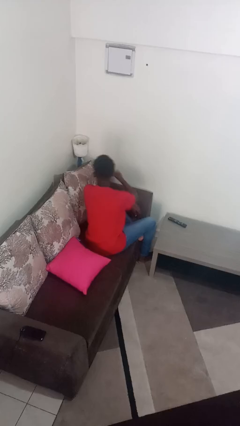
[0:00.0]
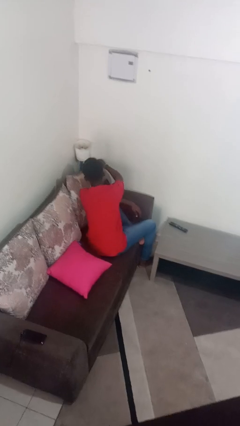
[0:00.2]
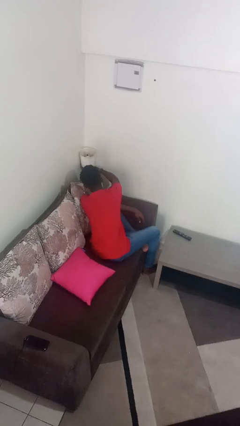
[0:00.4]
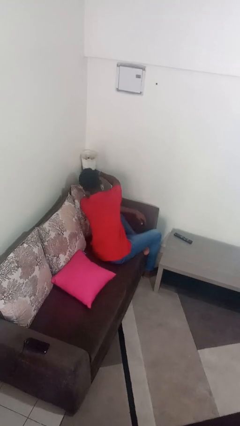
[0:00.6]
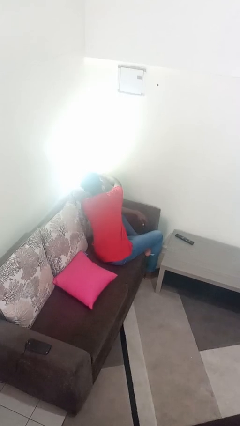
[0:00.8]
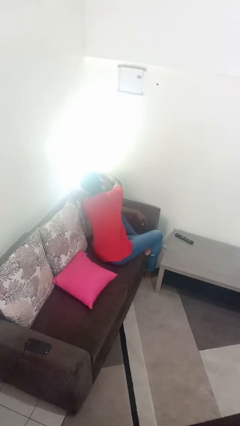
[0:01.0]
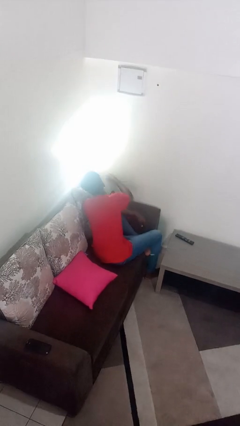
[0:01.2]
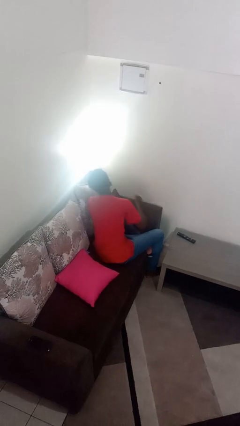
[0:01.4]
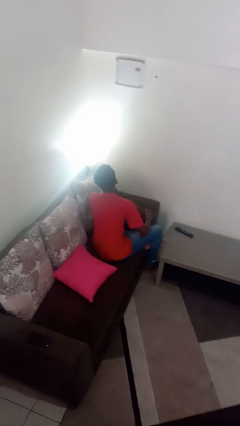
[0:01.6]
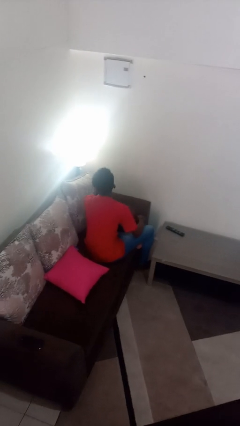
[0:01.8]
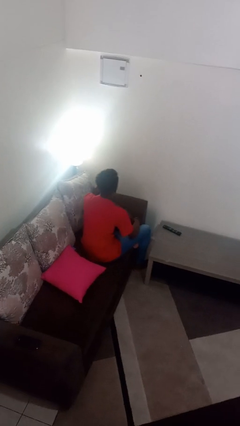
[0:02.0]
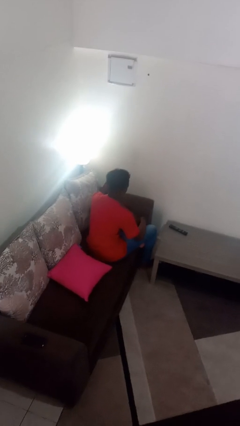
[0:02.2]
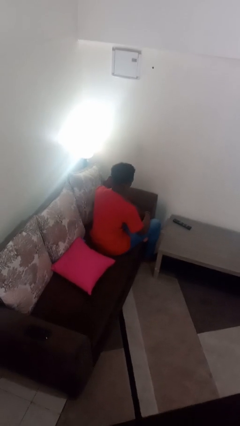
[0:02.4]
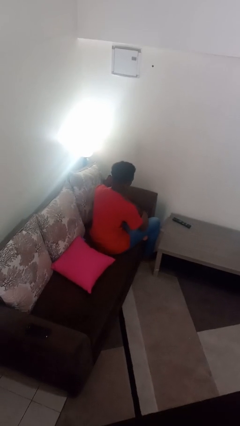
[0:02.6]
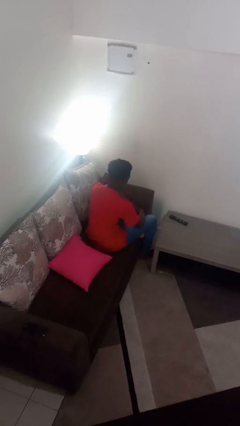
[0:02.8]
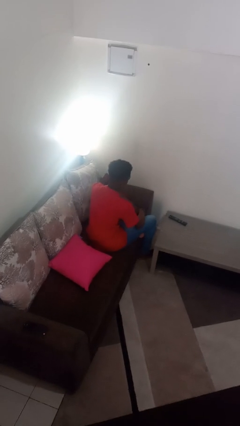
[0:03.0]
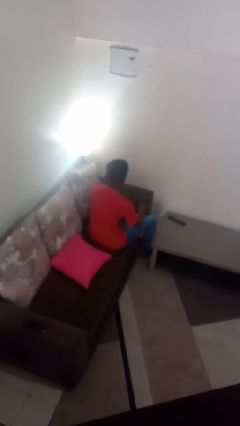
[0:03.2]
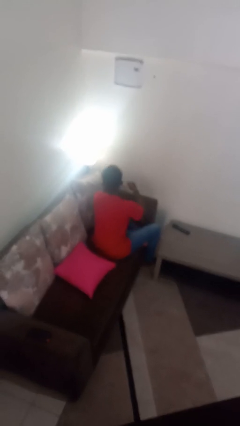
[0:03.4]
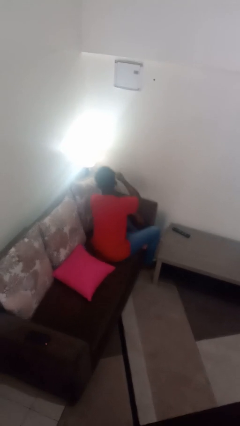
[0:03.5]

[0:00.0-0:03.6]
person turns on lamp

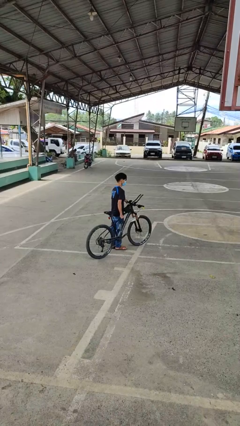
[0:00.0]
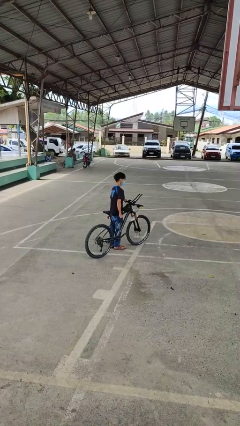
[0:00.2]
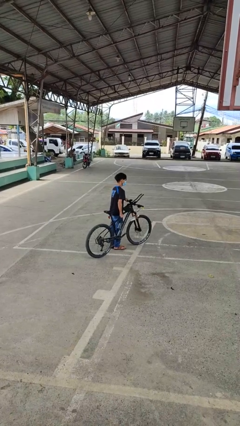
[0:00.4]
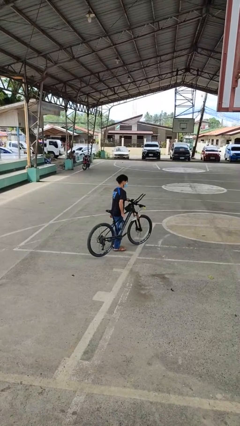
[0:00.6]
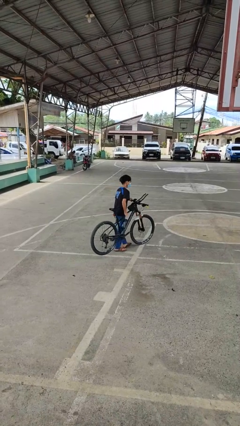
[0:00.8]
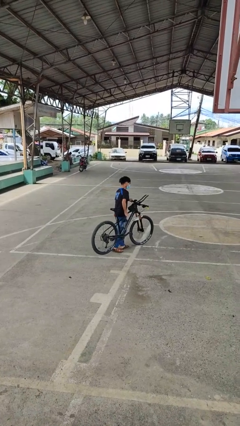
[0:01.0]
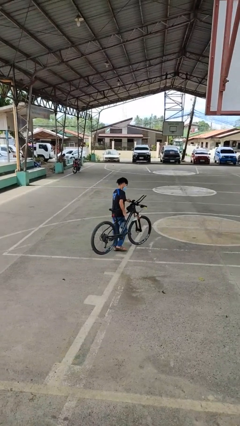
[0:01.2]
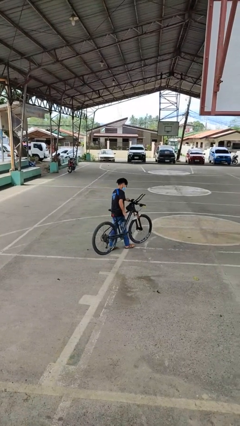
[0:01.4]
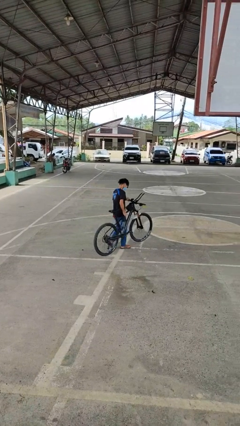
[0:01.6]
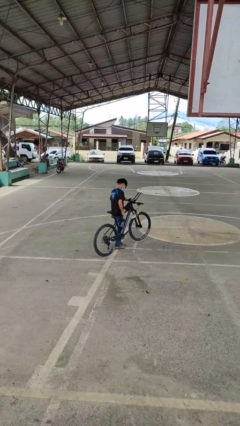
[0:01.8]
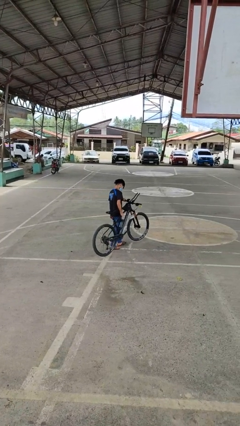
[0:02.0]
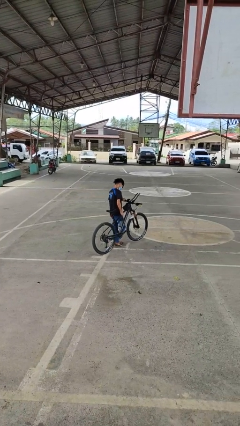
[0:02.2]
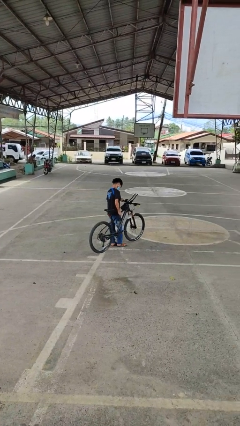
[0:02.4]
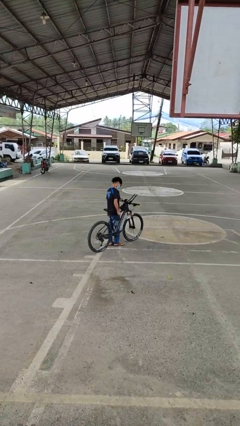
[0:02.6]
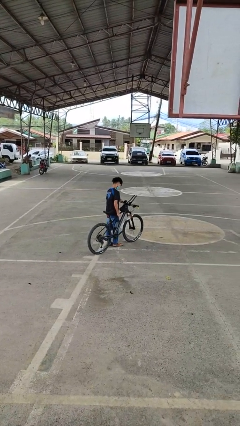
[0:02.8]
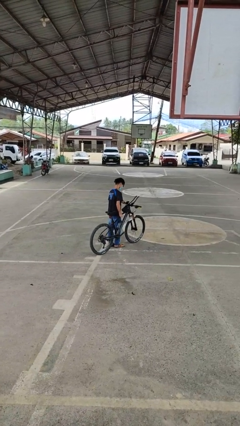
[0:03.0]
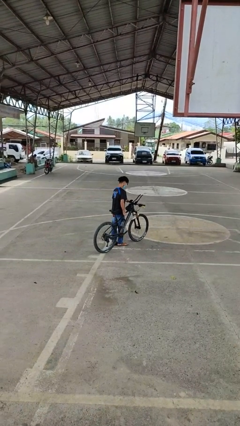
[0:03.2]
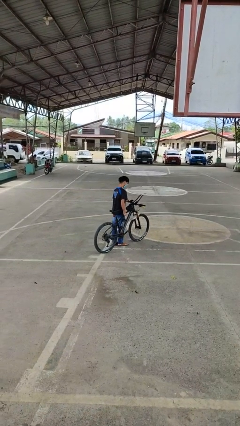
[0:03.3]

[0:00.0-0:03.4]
person carries bicycle

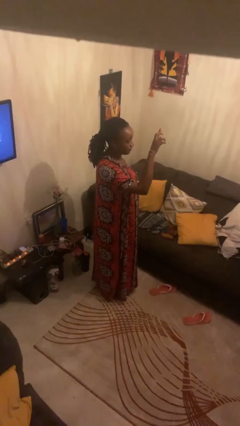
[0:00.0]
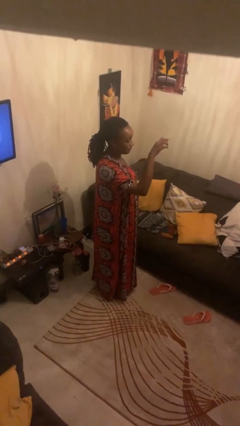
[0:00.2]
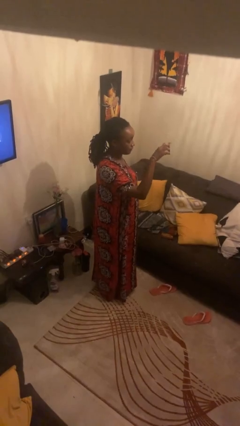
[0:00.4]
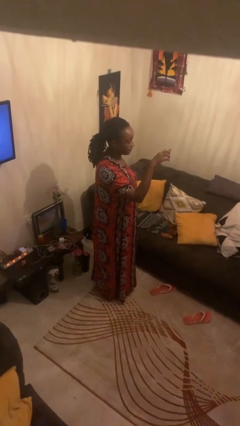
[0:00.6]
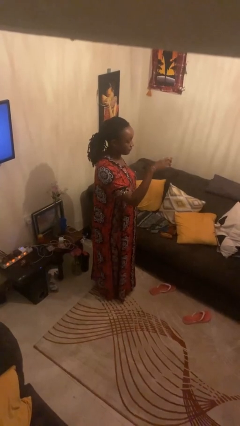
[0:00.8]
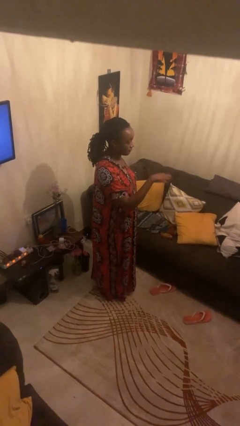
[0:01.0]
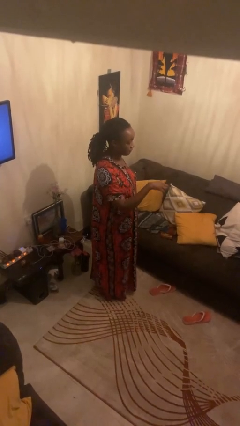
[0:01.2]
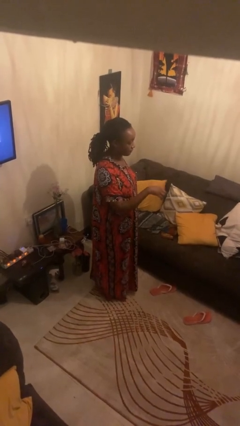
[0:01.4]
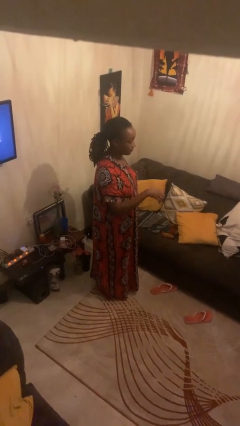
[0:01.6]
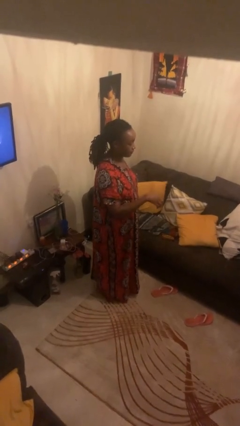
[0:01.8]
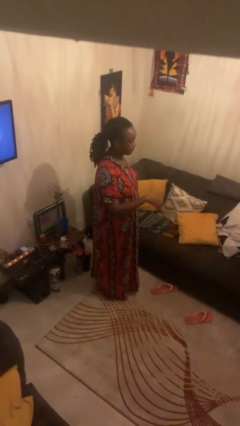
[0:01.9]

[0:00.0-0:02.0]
person gestures swipe down

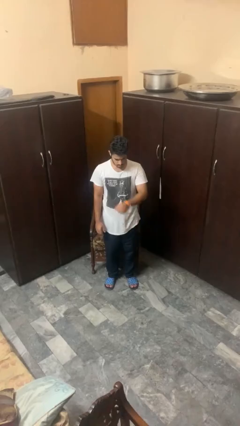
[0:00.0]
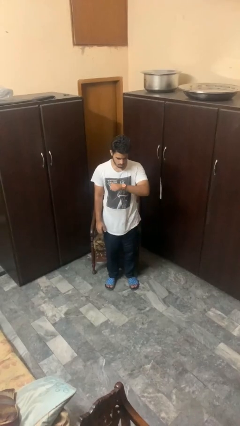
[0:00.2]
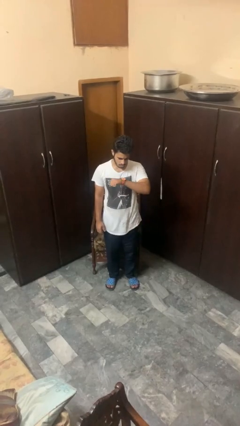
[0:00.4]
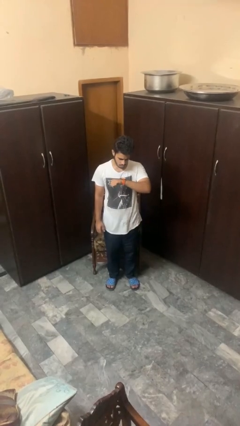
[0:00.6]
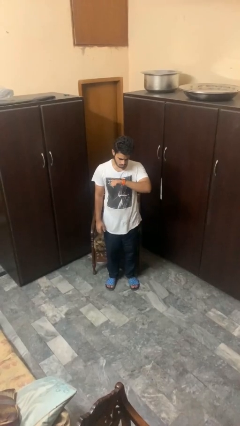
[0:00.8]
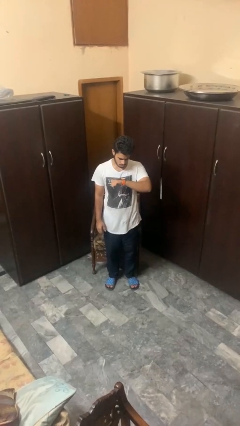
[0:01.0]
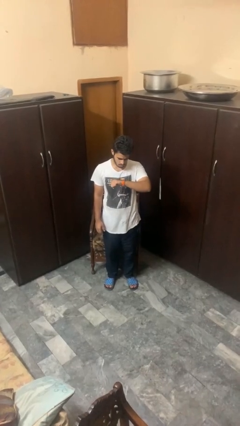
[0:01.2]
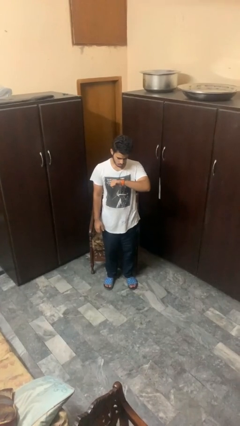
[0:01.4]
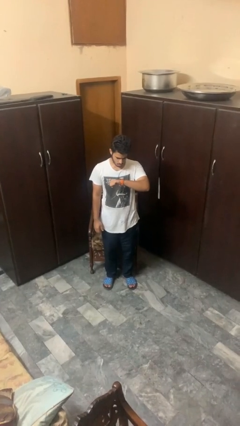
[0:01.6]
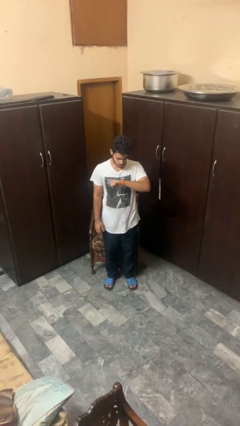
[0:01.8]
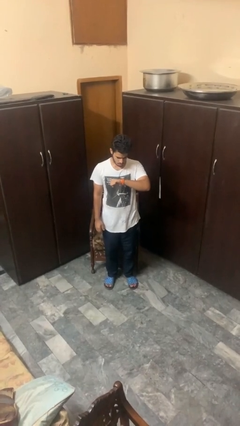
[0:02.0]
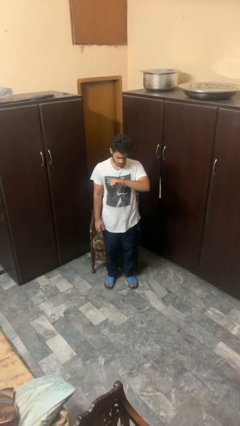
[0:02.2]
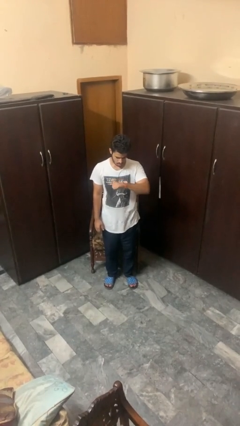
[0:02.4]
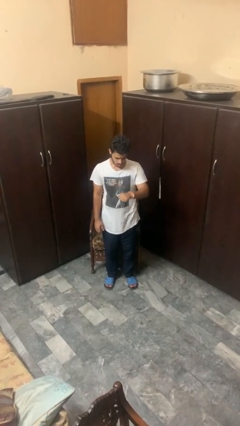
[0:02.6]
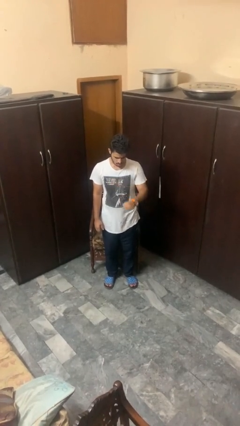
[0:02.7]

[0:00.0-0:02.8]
person looks at wristwatch

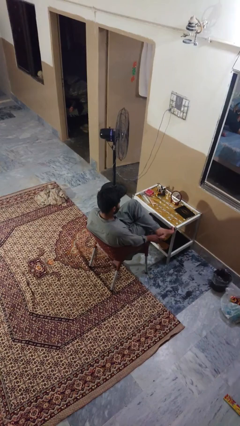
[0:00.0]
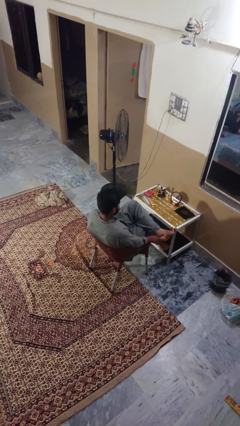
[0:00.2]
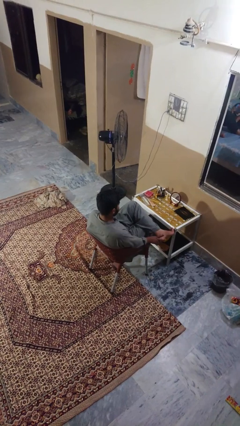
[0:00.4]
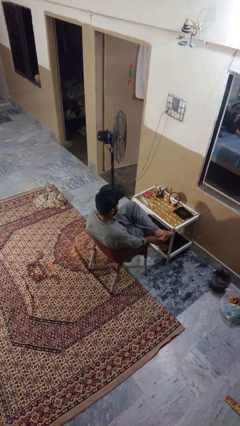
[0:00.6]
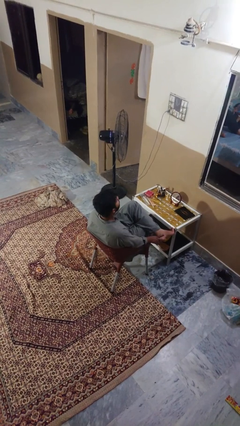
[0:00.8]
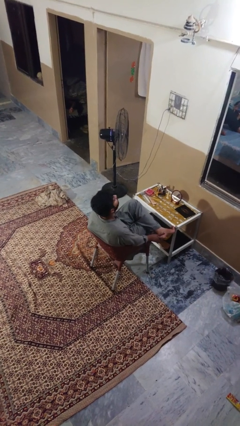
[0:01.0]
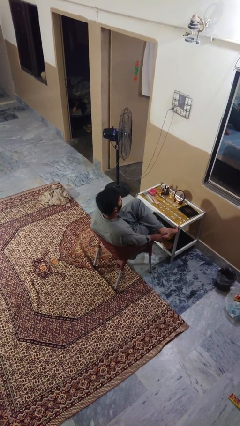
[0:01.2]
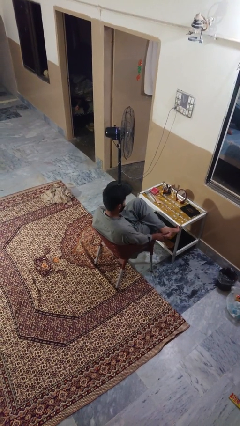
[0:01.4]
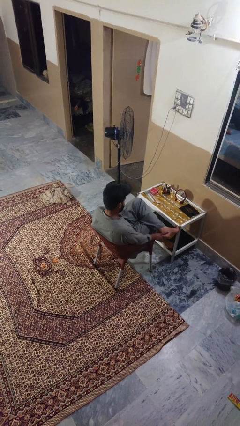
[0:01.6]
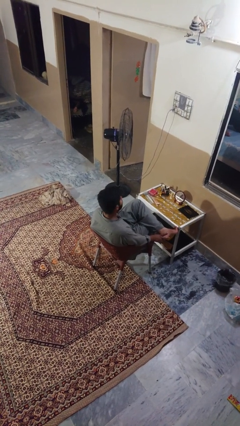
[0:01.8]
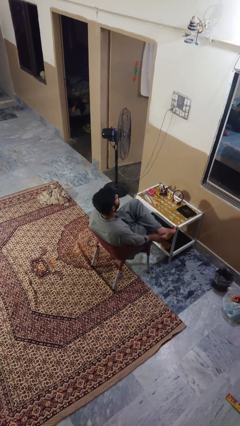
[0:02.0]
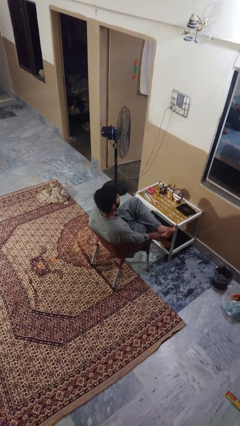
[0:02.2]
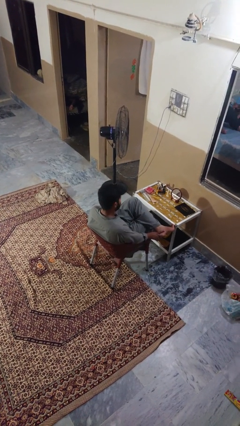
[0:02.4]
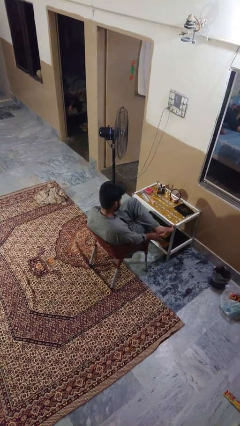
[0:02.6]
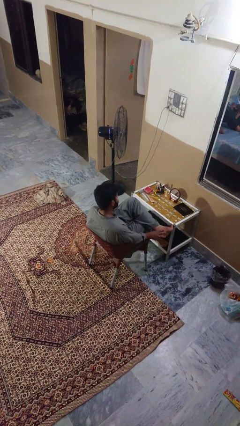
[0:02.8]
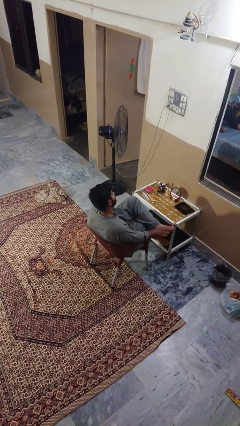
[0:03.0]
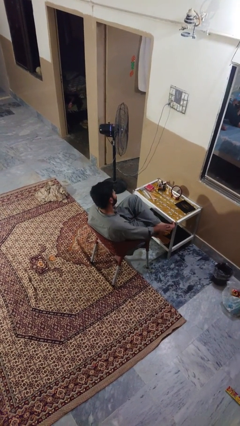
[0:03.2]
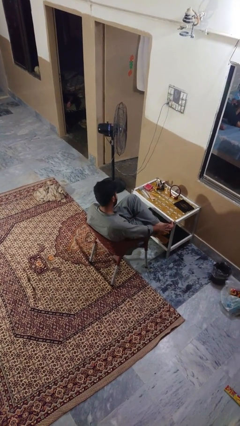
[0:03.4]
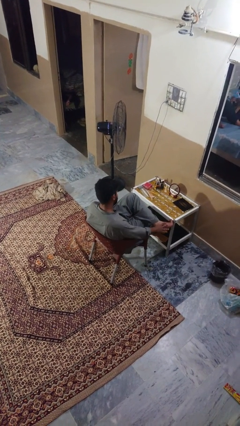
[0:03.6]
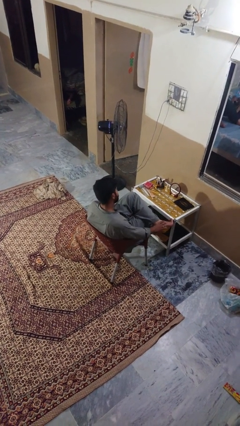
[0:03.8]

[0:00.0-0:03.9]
person nods head

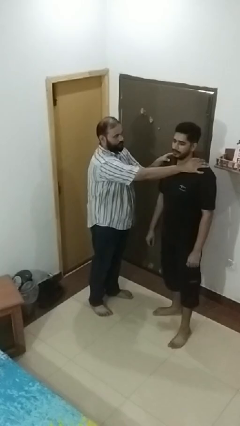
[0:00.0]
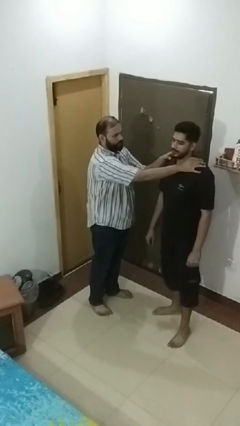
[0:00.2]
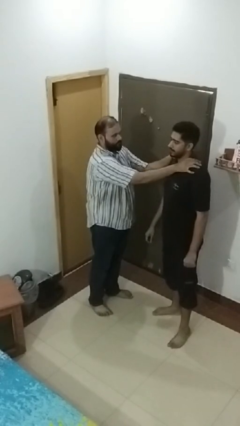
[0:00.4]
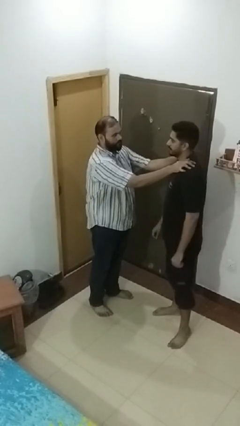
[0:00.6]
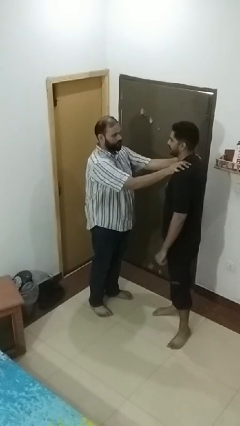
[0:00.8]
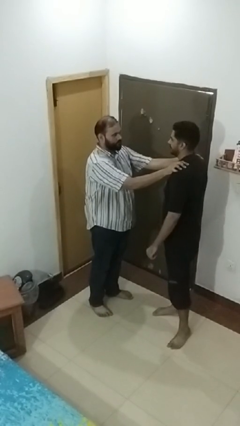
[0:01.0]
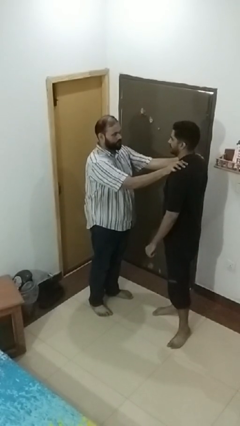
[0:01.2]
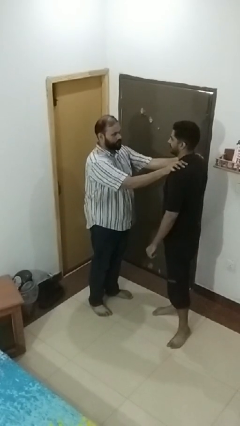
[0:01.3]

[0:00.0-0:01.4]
person spins person around

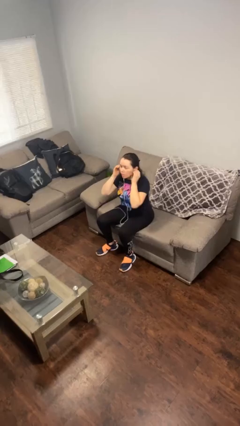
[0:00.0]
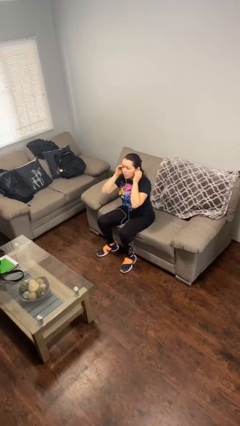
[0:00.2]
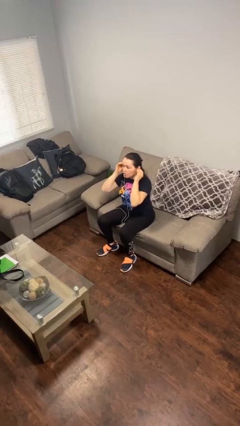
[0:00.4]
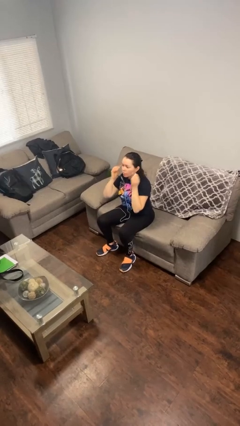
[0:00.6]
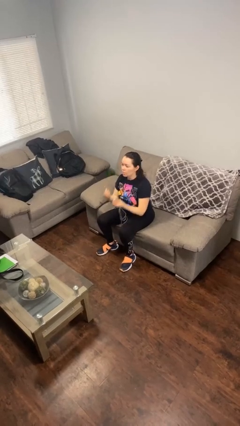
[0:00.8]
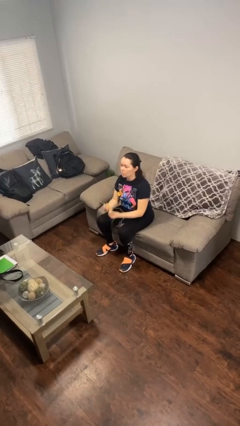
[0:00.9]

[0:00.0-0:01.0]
person takes off headphones
